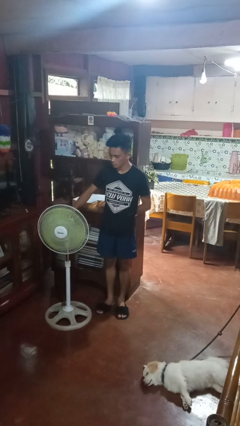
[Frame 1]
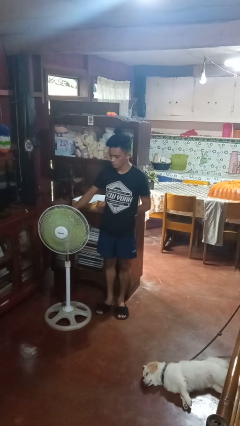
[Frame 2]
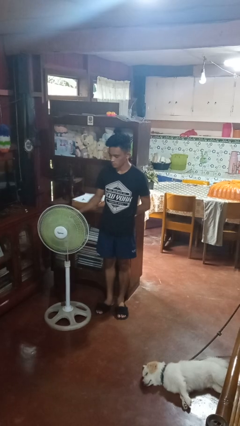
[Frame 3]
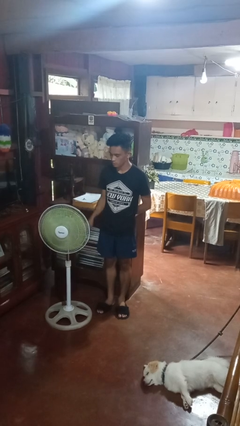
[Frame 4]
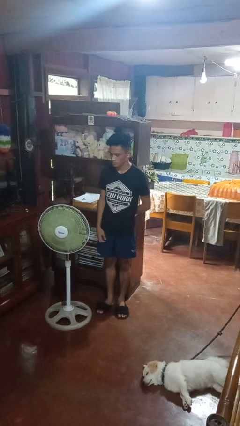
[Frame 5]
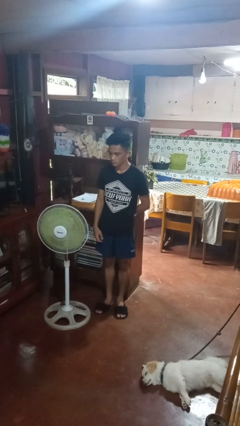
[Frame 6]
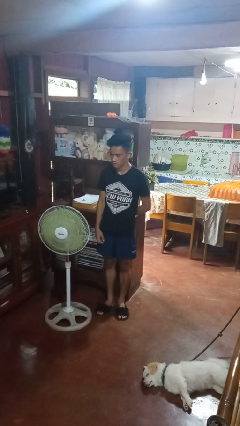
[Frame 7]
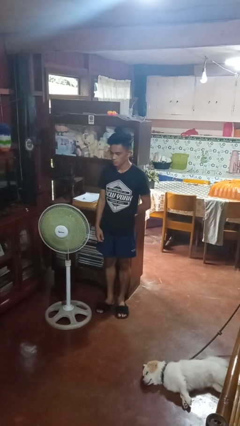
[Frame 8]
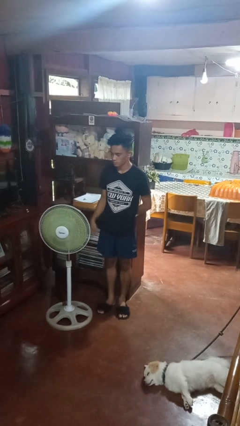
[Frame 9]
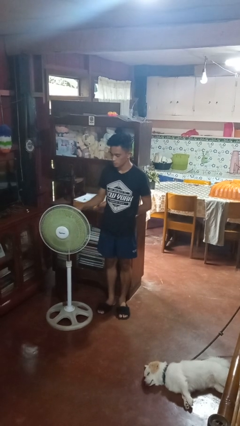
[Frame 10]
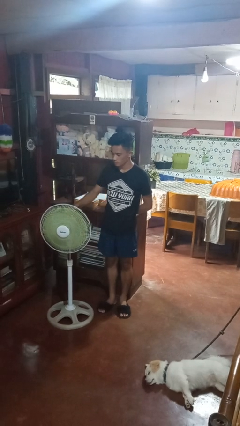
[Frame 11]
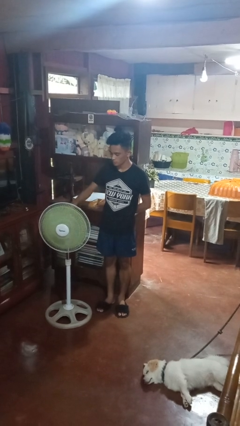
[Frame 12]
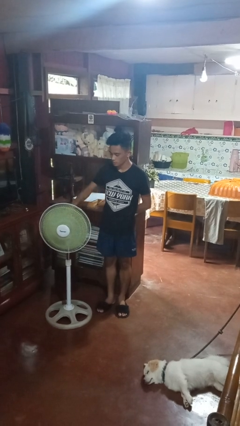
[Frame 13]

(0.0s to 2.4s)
person turns on fan

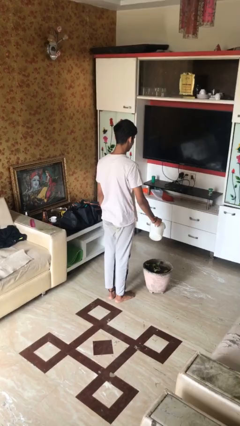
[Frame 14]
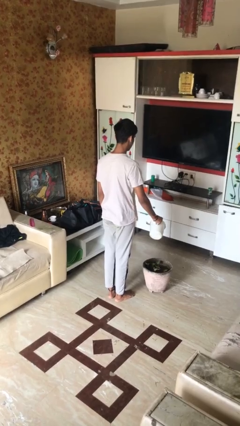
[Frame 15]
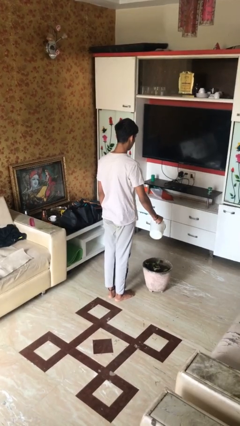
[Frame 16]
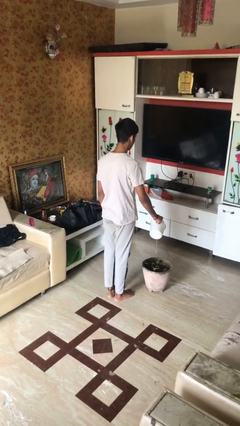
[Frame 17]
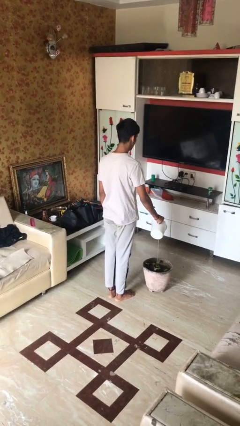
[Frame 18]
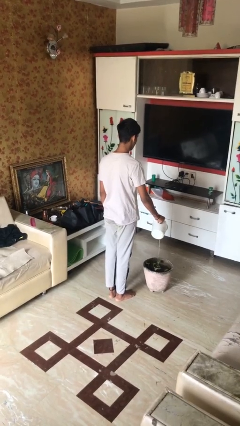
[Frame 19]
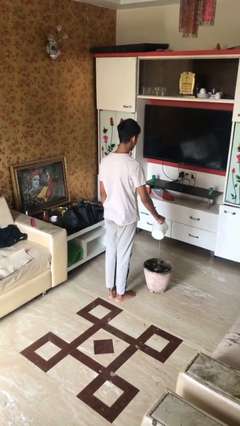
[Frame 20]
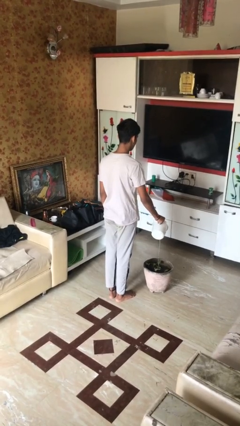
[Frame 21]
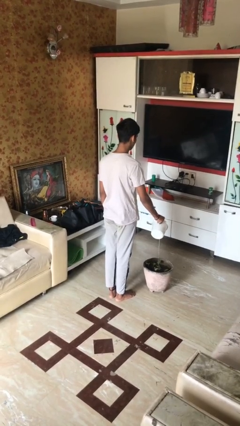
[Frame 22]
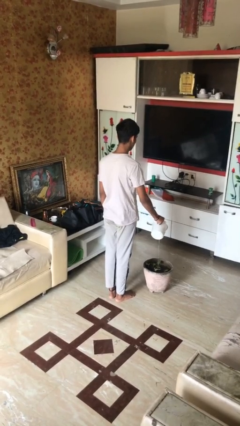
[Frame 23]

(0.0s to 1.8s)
person waters houseplant

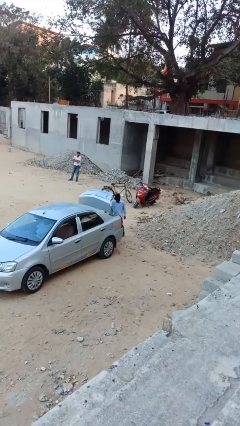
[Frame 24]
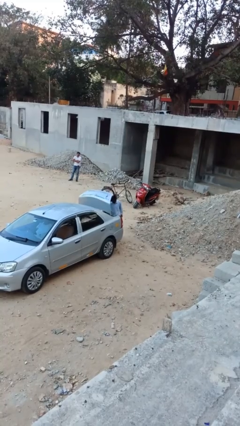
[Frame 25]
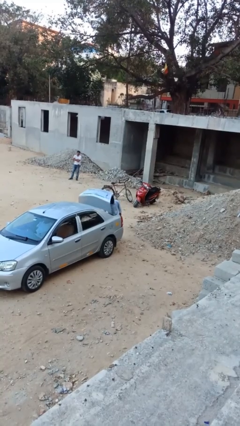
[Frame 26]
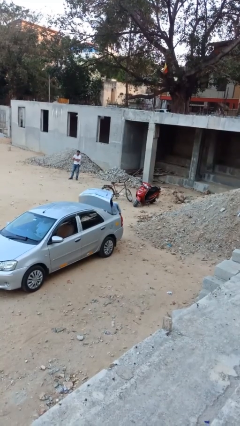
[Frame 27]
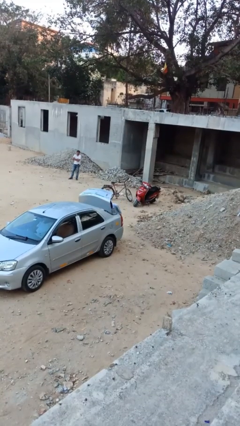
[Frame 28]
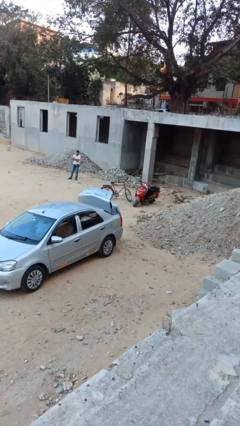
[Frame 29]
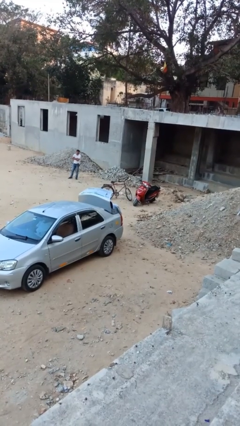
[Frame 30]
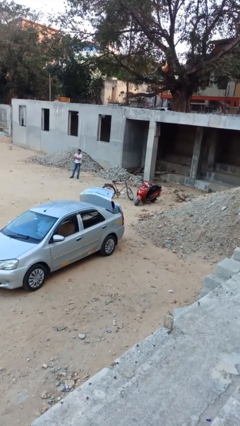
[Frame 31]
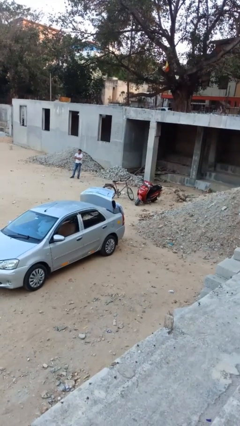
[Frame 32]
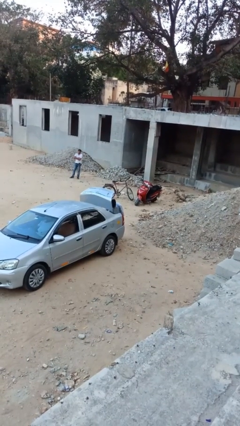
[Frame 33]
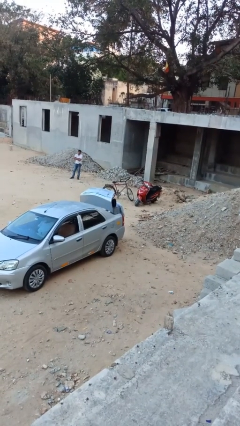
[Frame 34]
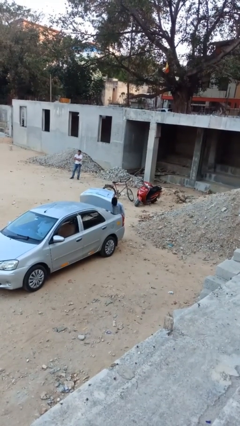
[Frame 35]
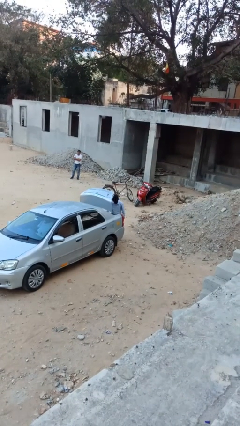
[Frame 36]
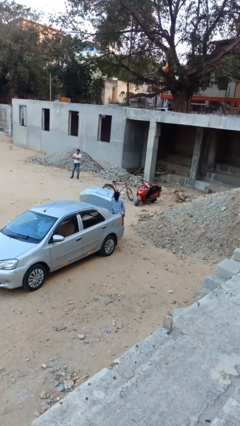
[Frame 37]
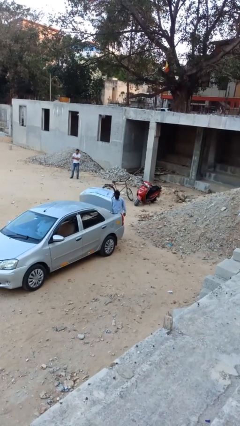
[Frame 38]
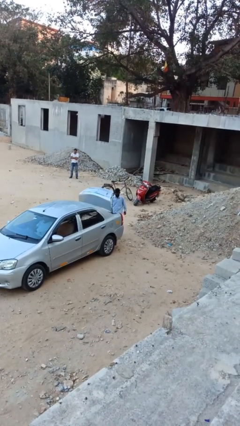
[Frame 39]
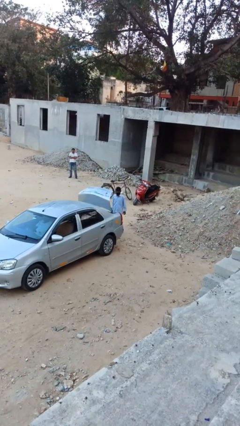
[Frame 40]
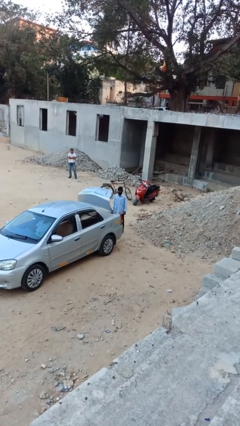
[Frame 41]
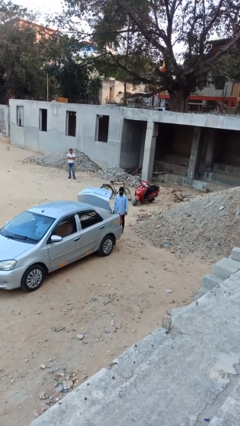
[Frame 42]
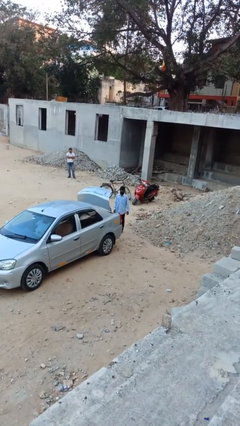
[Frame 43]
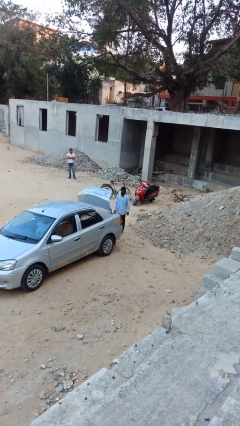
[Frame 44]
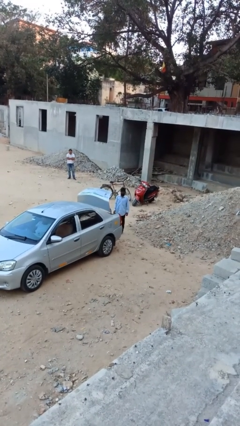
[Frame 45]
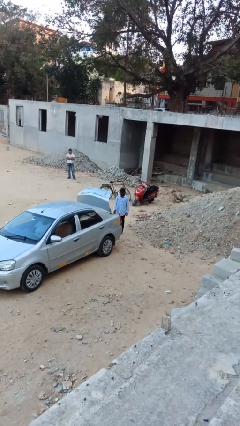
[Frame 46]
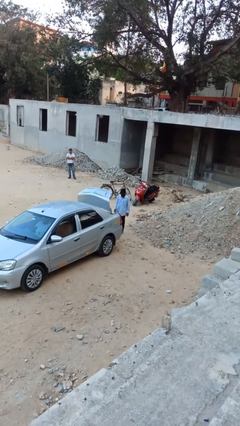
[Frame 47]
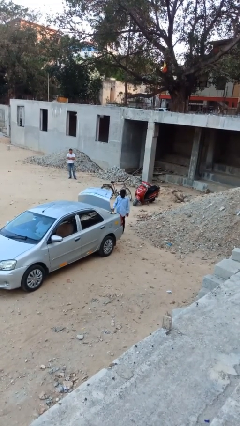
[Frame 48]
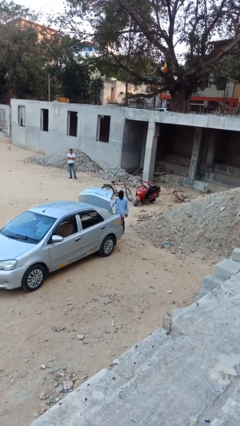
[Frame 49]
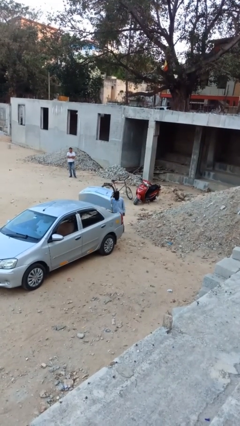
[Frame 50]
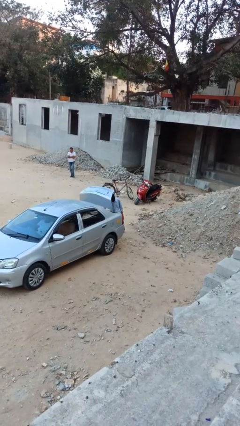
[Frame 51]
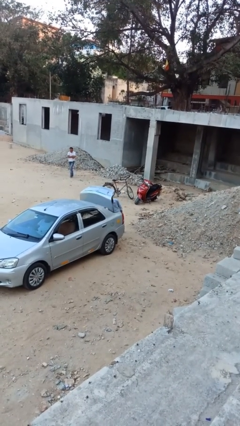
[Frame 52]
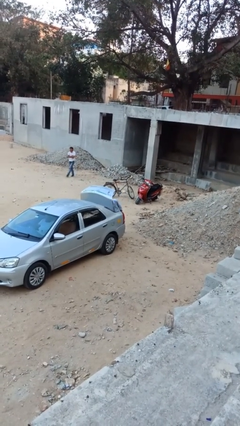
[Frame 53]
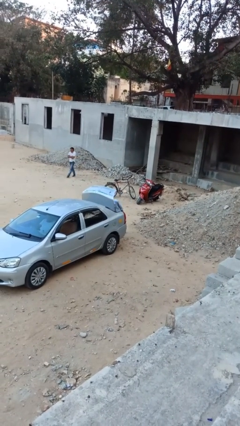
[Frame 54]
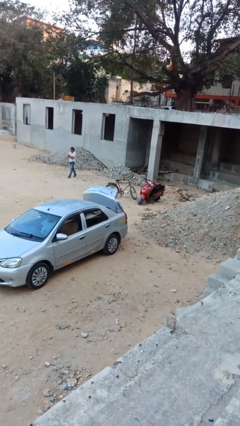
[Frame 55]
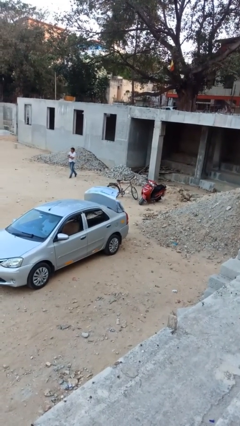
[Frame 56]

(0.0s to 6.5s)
person loads car

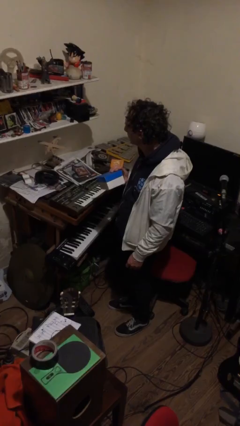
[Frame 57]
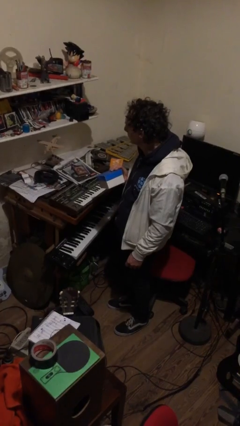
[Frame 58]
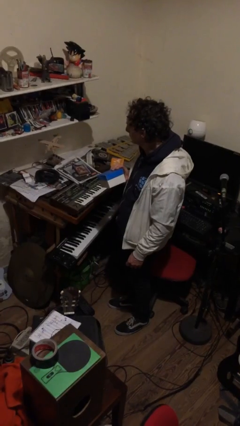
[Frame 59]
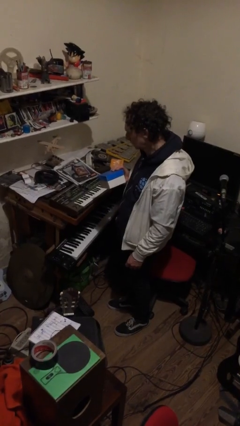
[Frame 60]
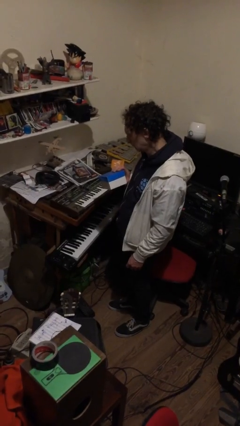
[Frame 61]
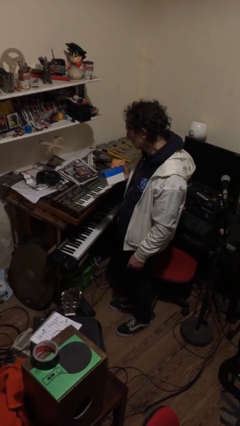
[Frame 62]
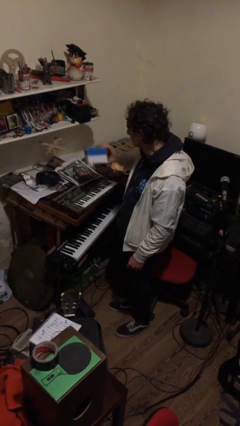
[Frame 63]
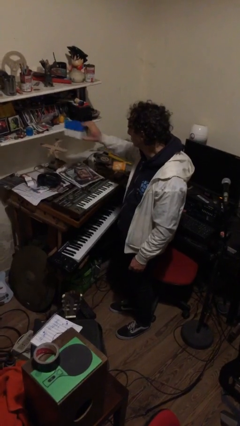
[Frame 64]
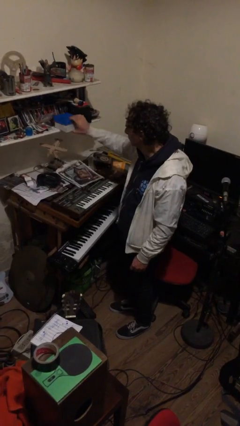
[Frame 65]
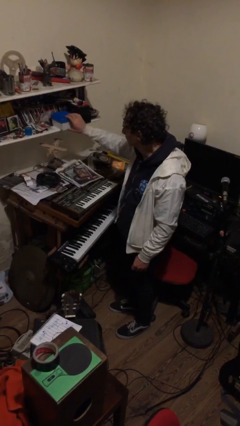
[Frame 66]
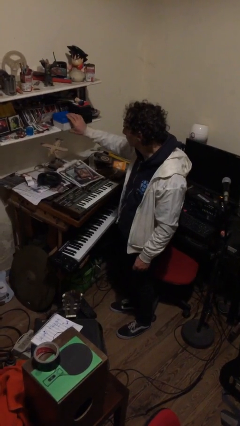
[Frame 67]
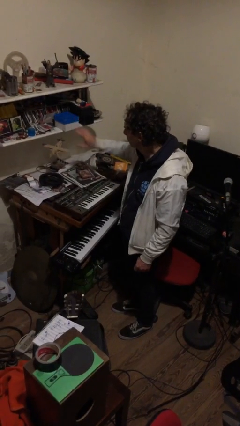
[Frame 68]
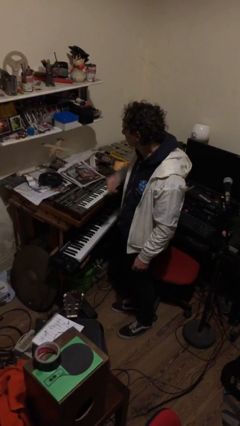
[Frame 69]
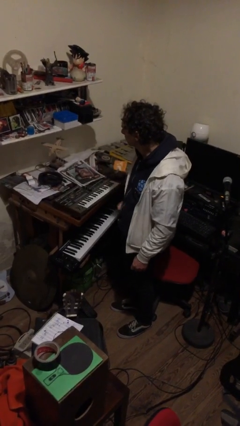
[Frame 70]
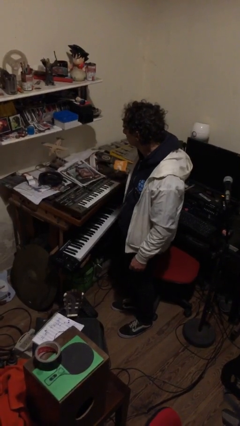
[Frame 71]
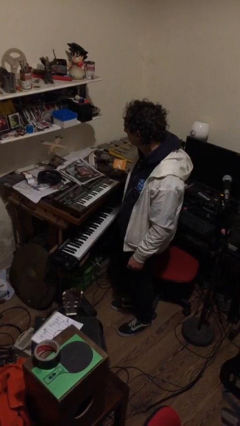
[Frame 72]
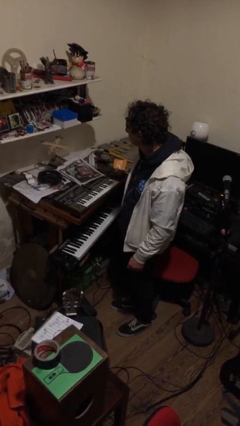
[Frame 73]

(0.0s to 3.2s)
person puts down object on countertop

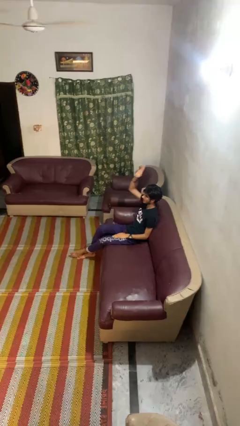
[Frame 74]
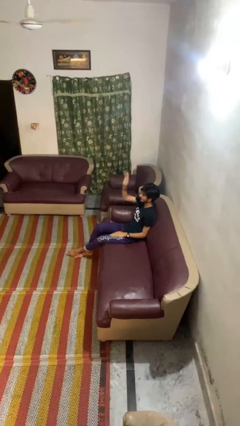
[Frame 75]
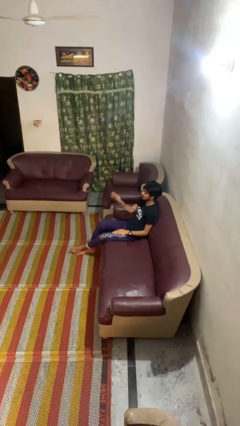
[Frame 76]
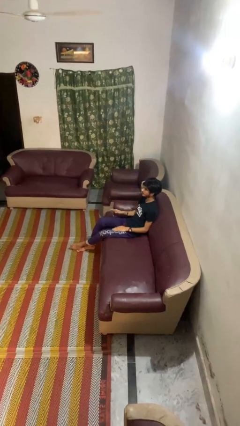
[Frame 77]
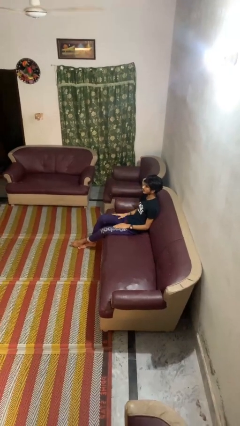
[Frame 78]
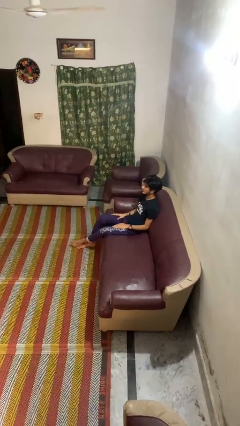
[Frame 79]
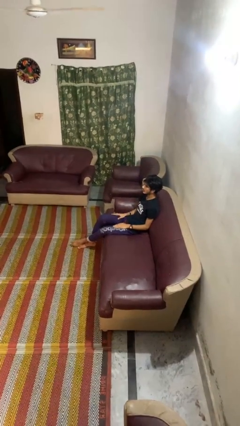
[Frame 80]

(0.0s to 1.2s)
person gestures lower hand

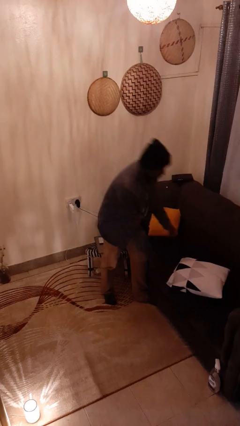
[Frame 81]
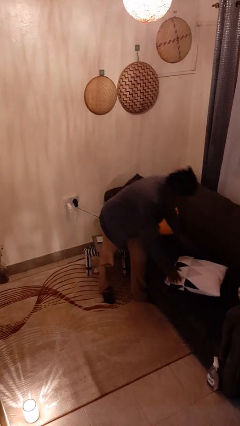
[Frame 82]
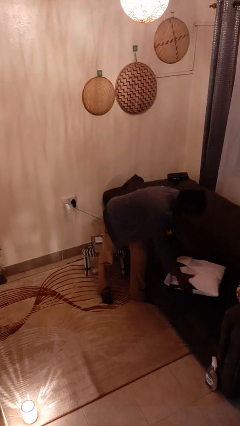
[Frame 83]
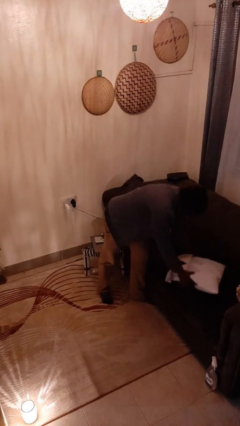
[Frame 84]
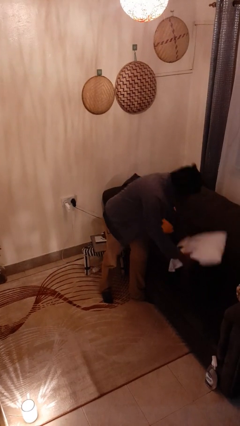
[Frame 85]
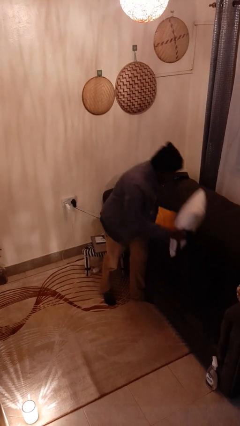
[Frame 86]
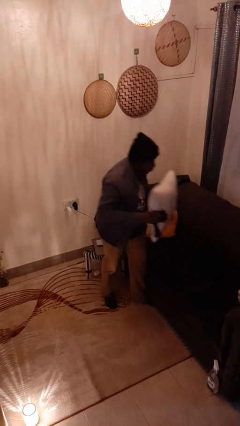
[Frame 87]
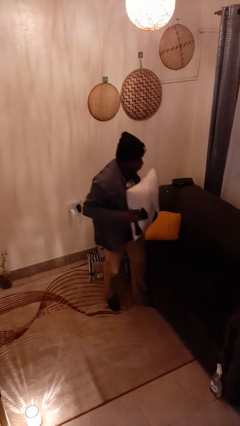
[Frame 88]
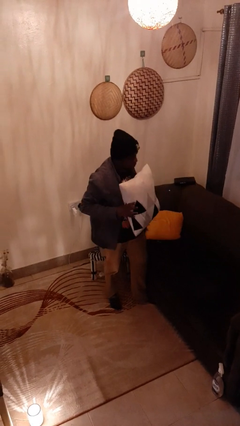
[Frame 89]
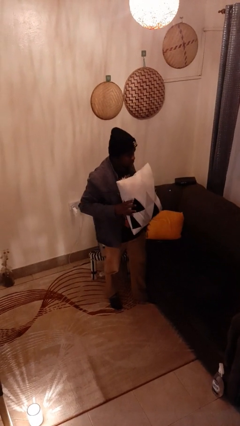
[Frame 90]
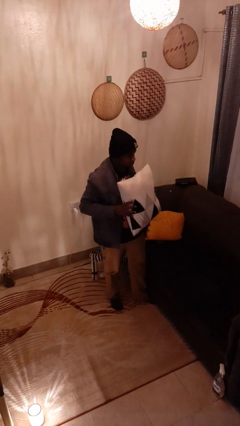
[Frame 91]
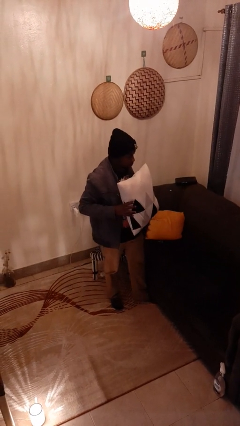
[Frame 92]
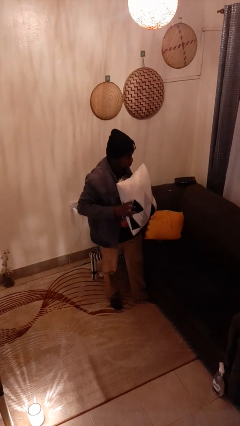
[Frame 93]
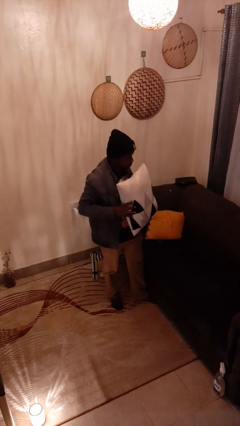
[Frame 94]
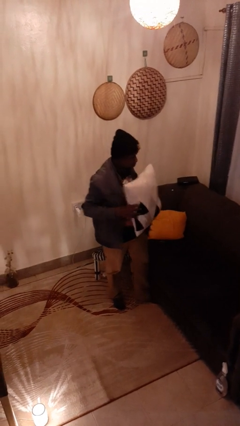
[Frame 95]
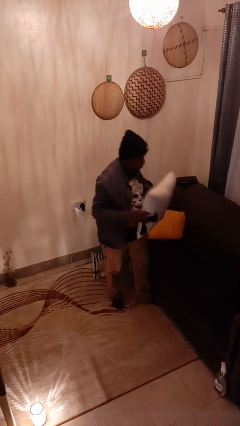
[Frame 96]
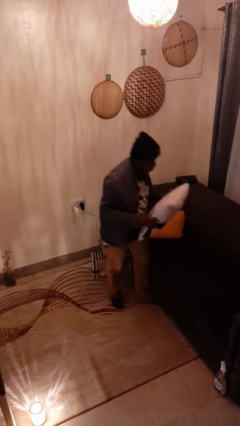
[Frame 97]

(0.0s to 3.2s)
person picks up object from couch
